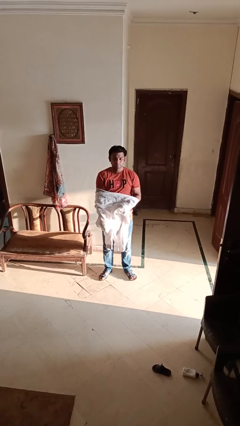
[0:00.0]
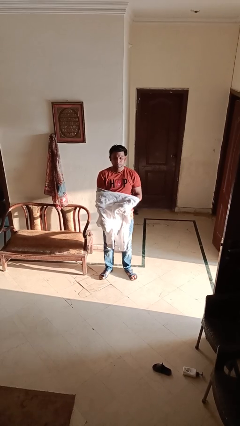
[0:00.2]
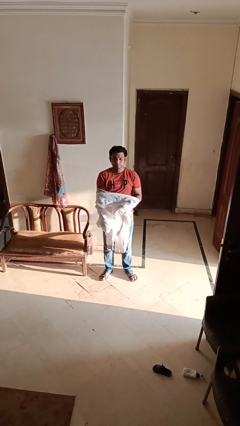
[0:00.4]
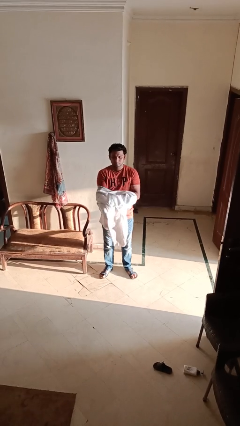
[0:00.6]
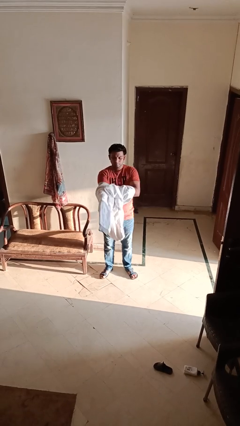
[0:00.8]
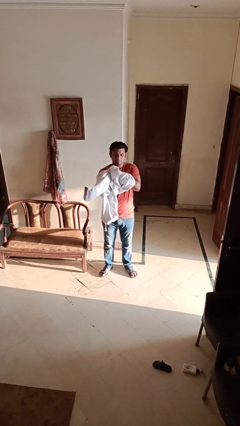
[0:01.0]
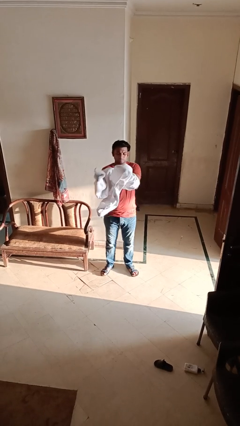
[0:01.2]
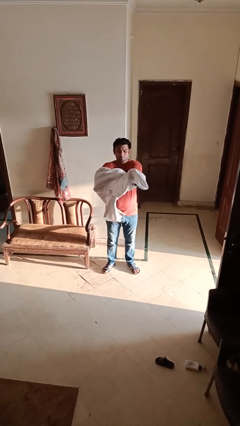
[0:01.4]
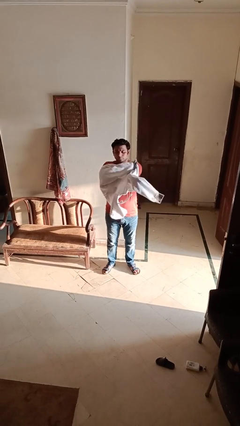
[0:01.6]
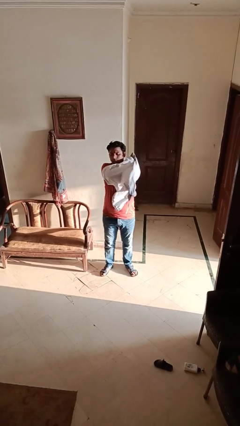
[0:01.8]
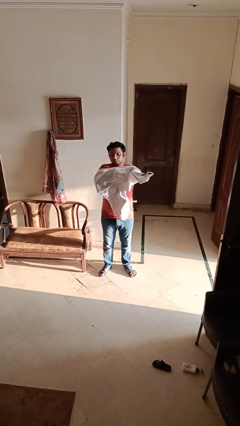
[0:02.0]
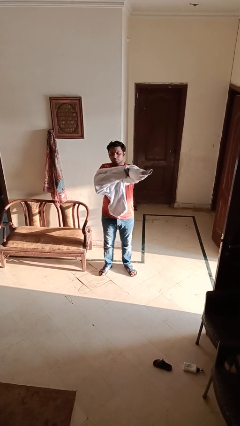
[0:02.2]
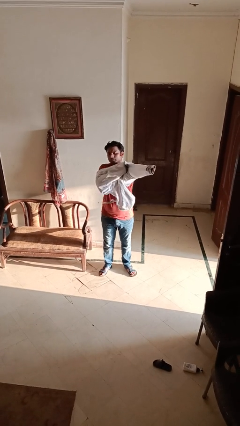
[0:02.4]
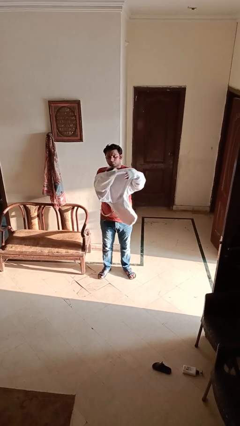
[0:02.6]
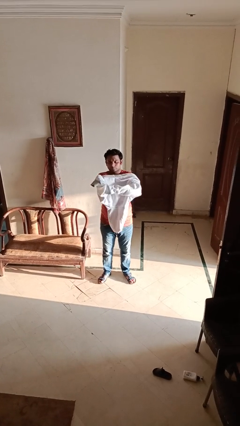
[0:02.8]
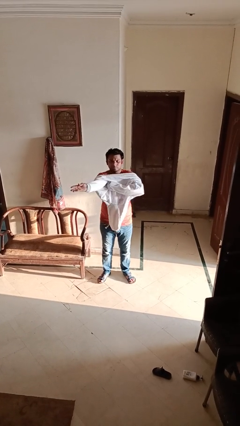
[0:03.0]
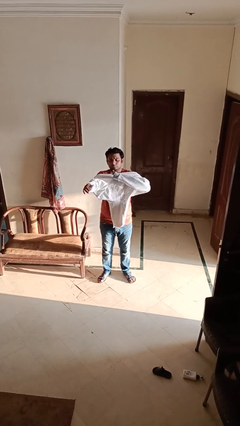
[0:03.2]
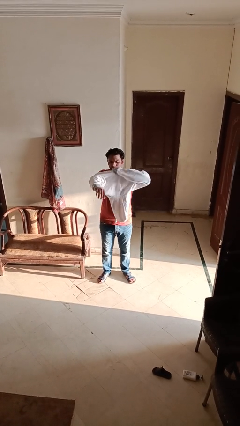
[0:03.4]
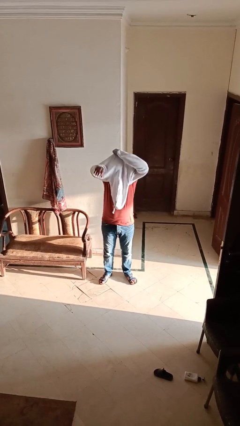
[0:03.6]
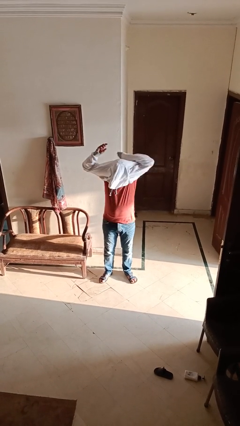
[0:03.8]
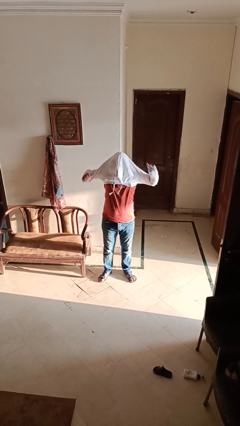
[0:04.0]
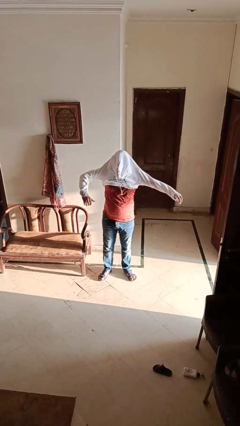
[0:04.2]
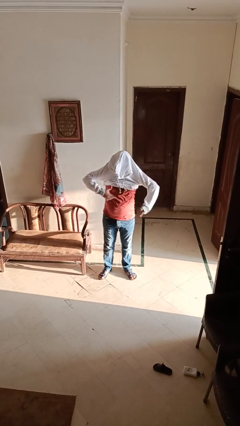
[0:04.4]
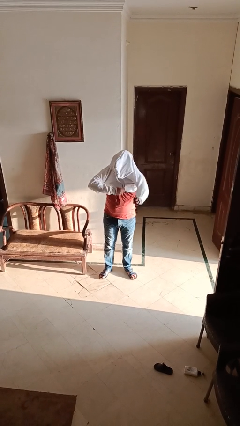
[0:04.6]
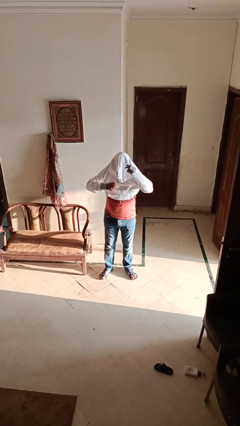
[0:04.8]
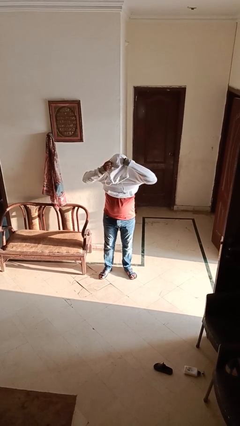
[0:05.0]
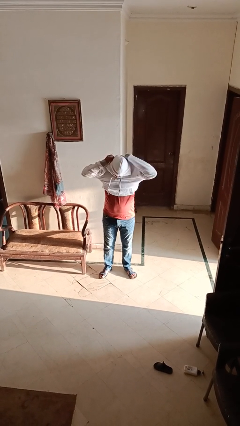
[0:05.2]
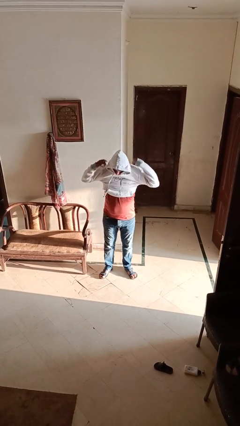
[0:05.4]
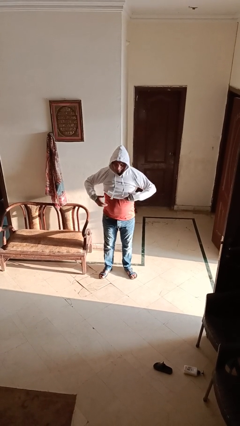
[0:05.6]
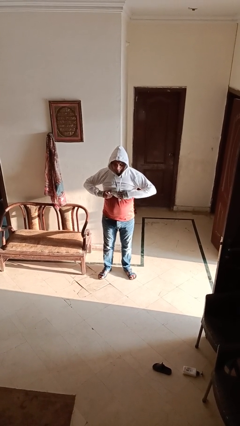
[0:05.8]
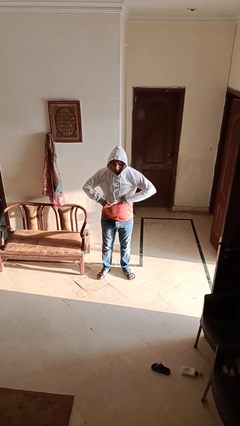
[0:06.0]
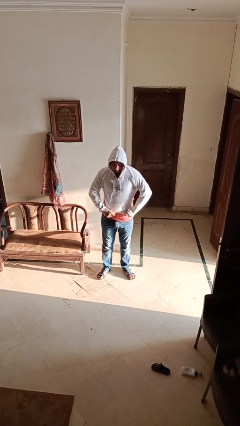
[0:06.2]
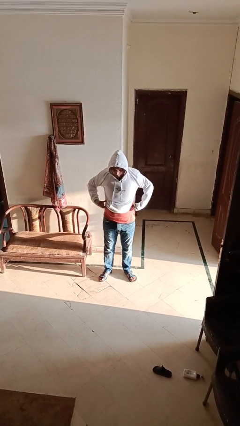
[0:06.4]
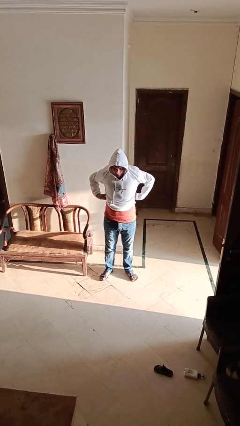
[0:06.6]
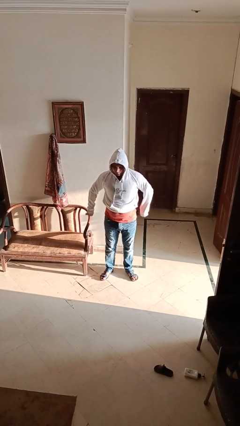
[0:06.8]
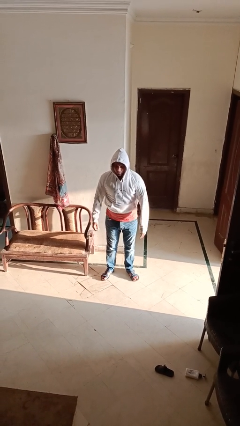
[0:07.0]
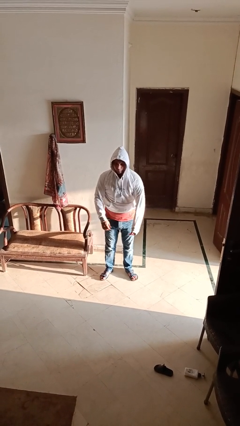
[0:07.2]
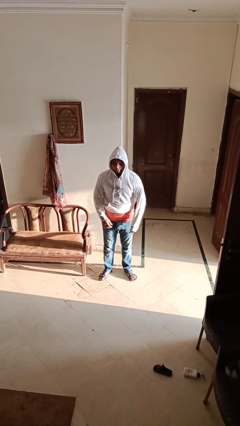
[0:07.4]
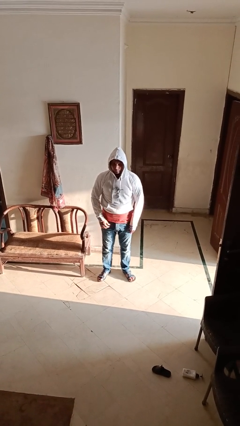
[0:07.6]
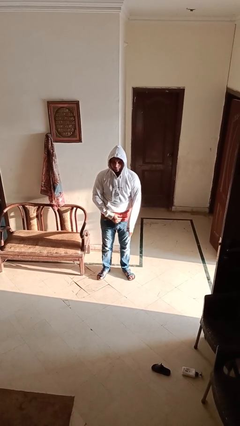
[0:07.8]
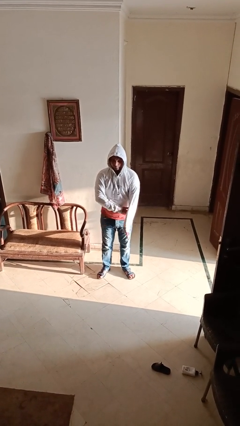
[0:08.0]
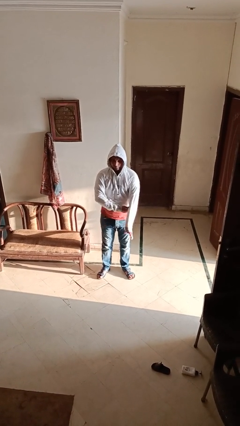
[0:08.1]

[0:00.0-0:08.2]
person puts on hoodie

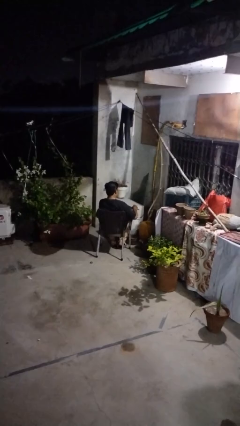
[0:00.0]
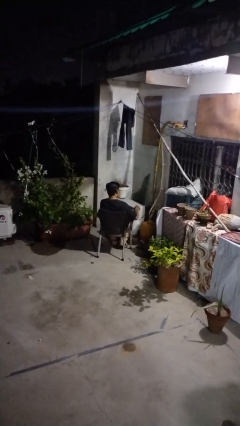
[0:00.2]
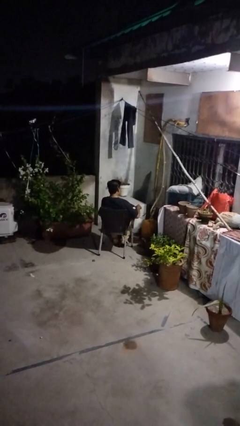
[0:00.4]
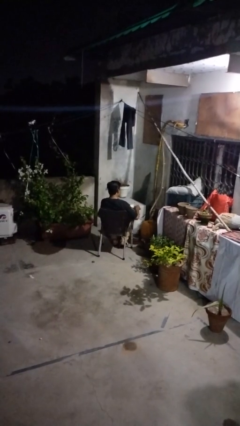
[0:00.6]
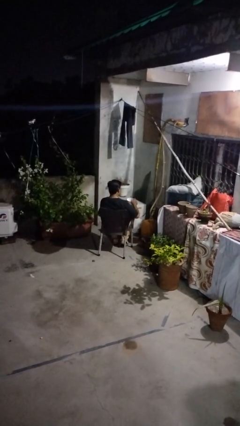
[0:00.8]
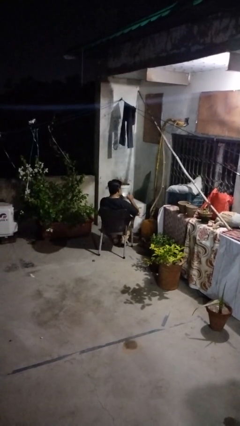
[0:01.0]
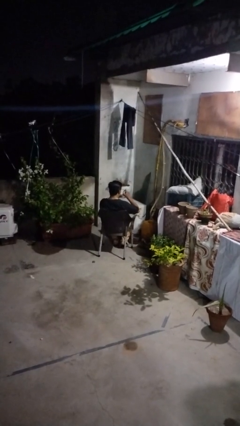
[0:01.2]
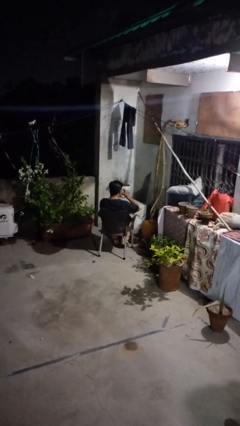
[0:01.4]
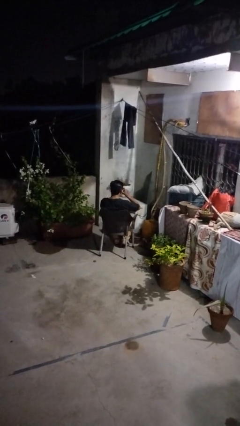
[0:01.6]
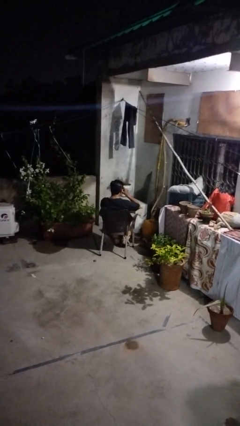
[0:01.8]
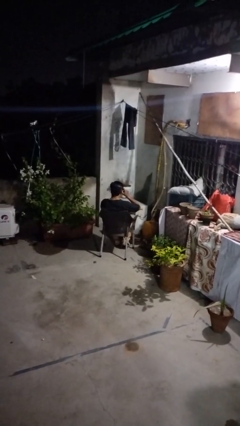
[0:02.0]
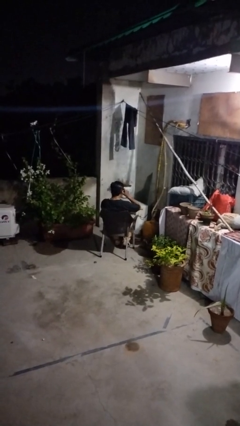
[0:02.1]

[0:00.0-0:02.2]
person drinks from mug

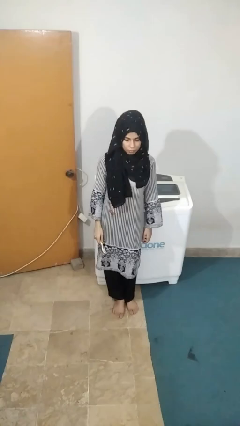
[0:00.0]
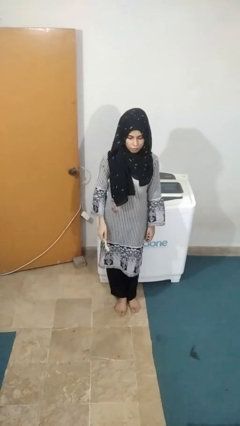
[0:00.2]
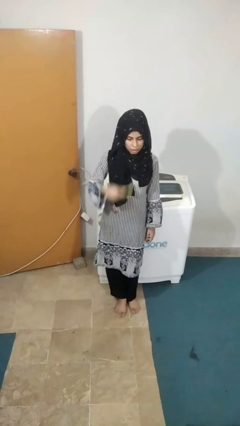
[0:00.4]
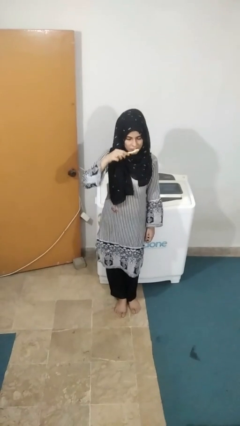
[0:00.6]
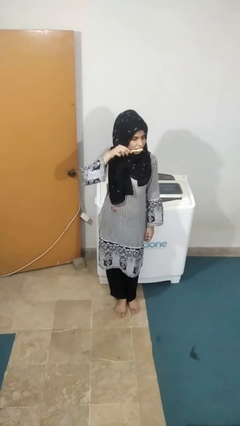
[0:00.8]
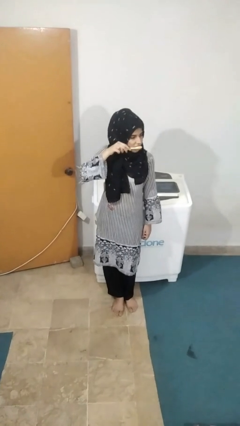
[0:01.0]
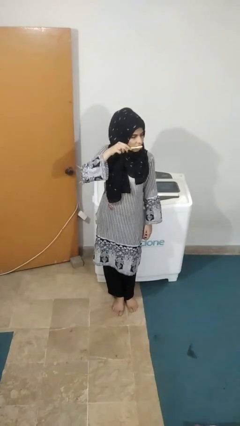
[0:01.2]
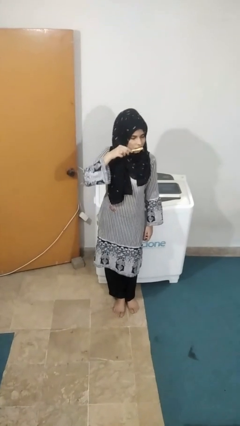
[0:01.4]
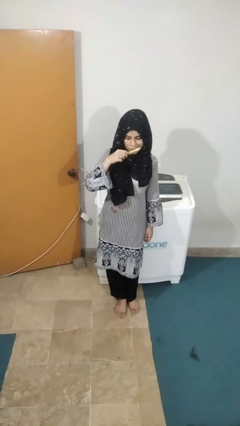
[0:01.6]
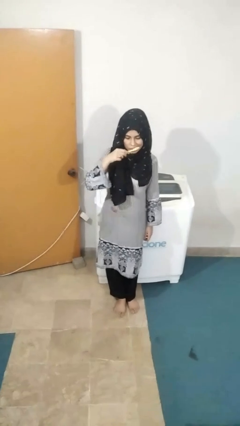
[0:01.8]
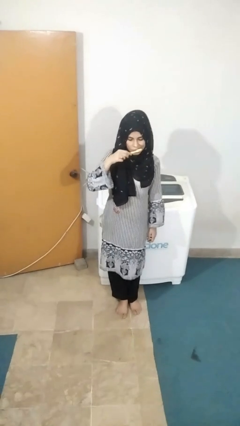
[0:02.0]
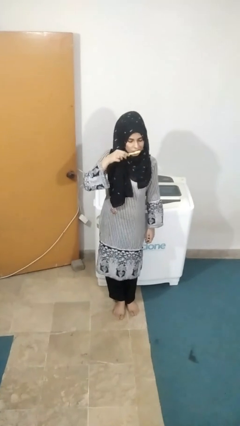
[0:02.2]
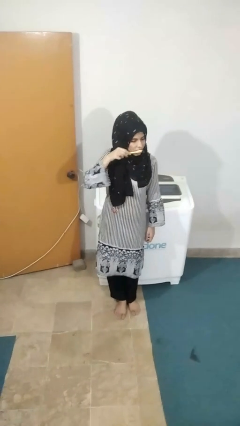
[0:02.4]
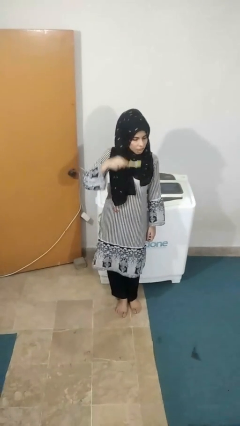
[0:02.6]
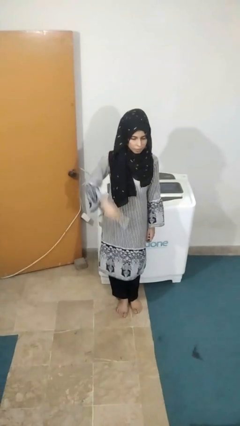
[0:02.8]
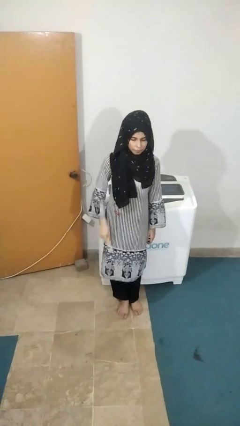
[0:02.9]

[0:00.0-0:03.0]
person brushes teeth

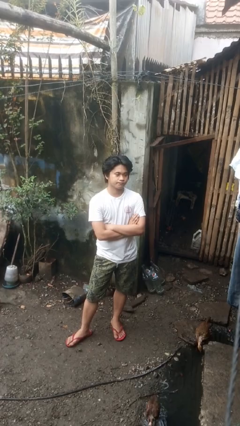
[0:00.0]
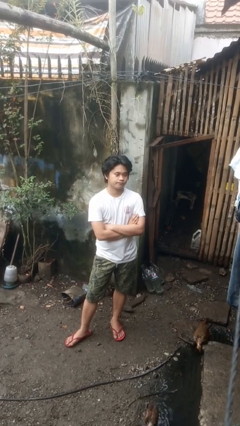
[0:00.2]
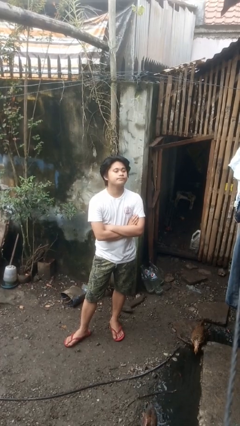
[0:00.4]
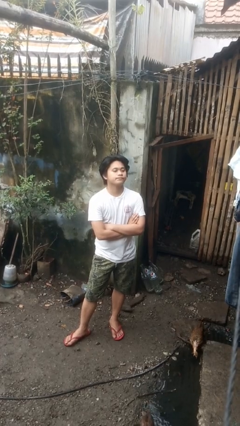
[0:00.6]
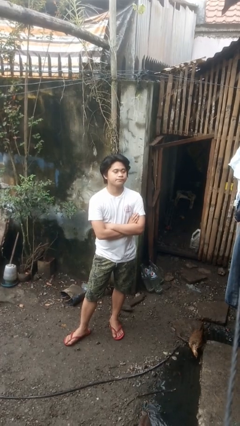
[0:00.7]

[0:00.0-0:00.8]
person nods head

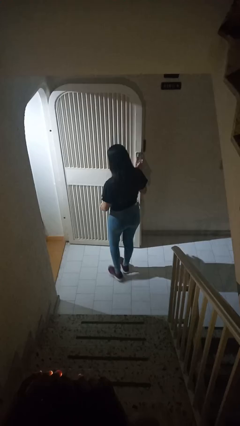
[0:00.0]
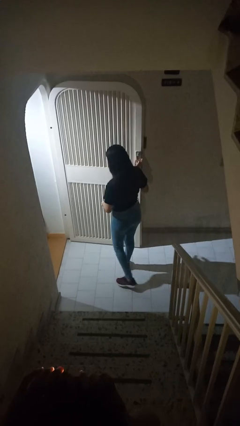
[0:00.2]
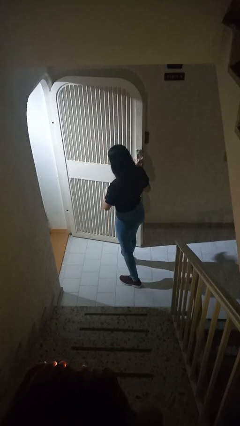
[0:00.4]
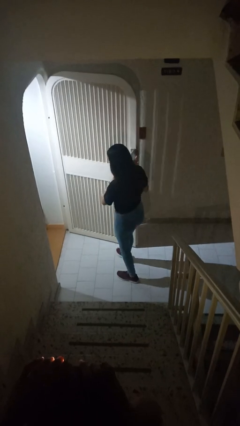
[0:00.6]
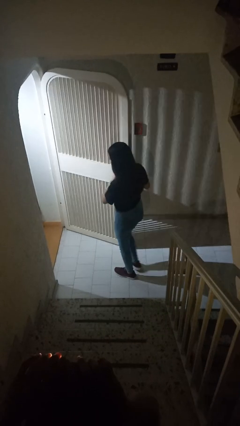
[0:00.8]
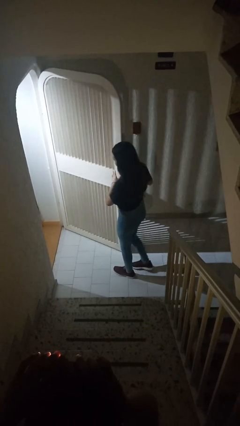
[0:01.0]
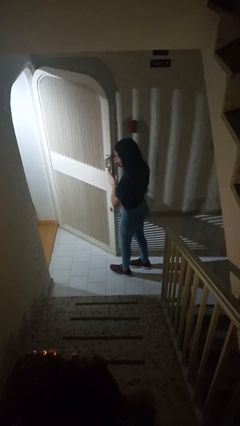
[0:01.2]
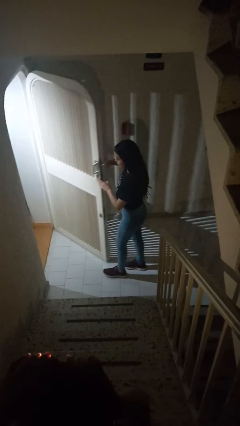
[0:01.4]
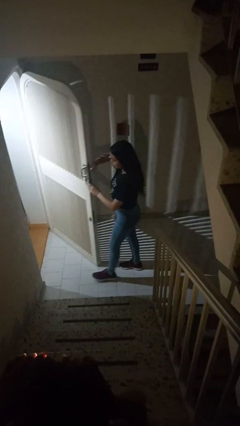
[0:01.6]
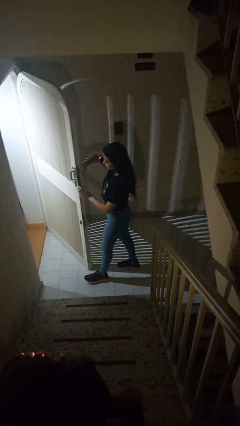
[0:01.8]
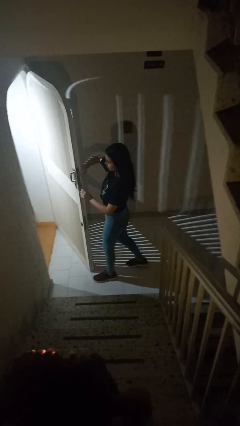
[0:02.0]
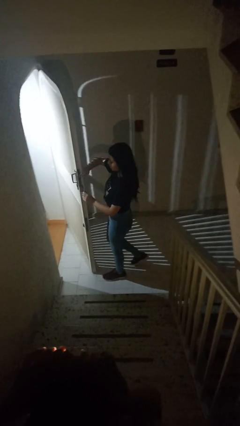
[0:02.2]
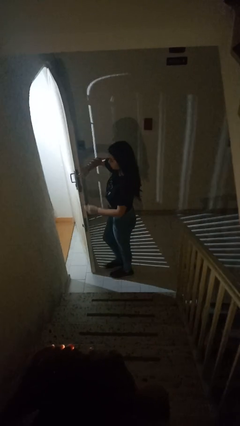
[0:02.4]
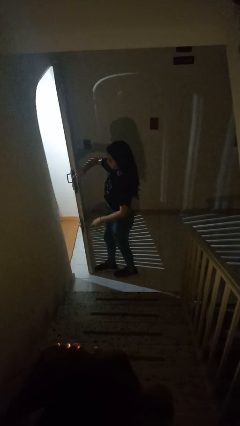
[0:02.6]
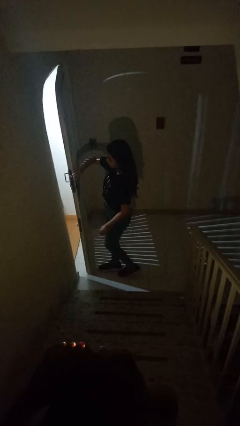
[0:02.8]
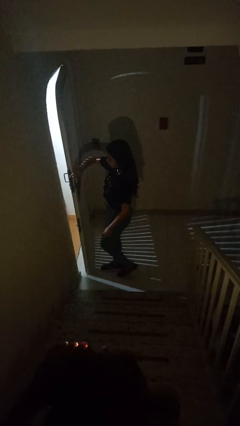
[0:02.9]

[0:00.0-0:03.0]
person closes facility door
